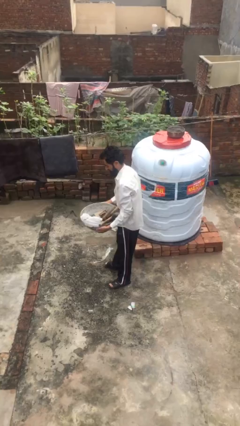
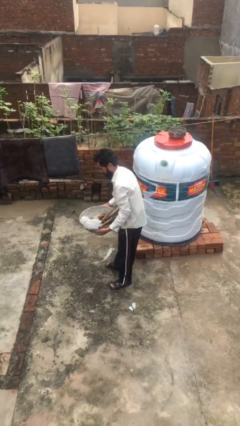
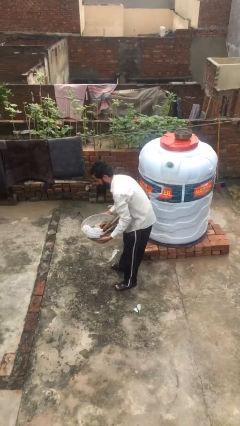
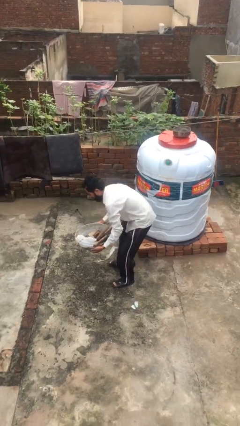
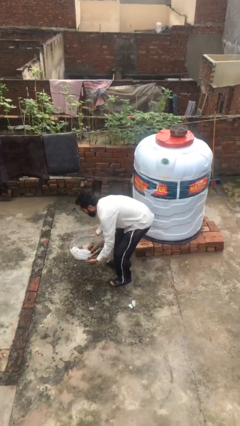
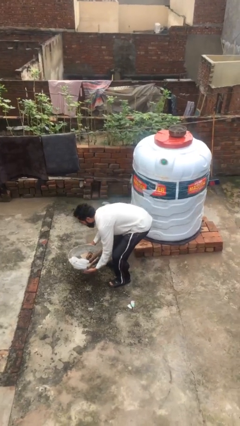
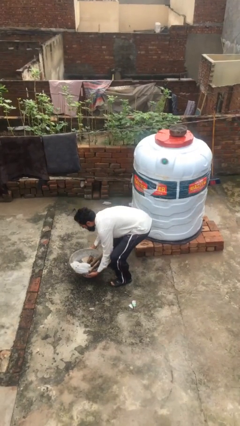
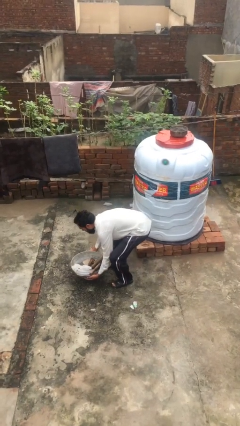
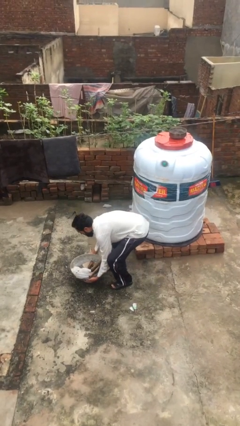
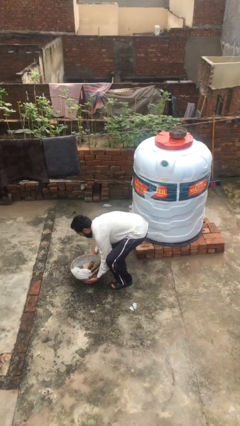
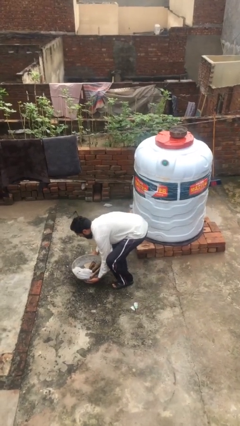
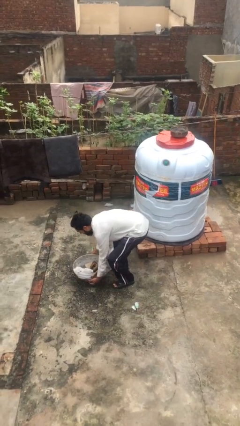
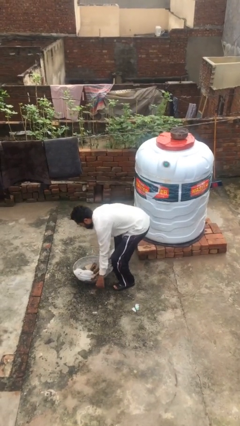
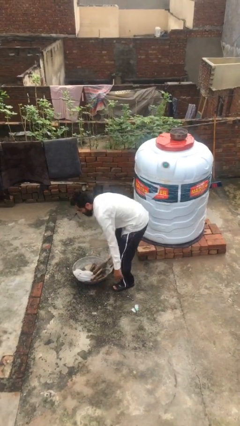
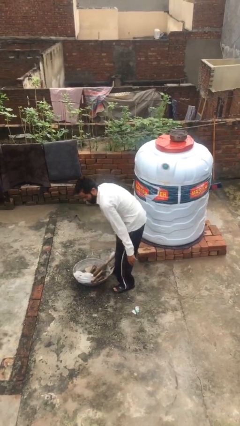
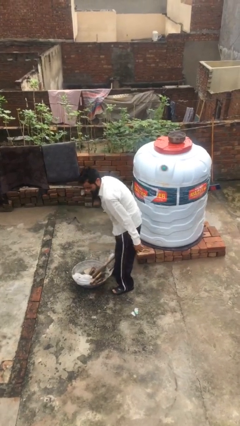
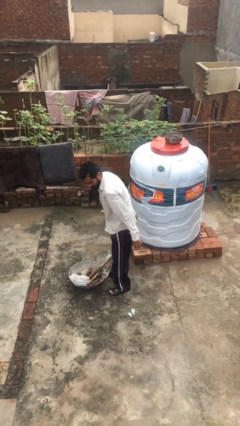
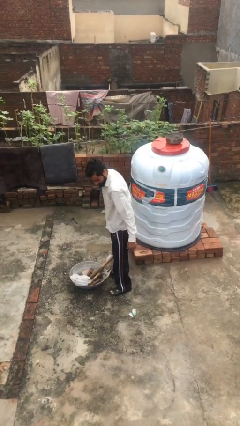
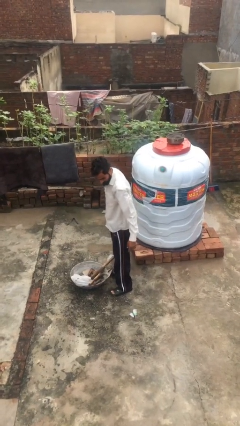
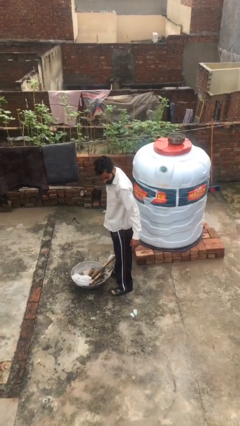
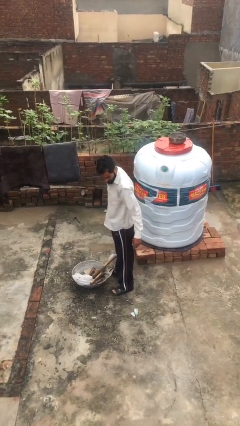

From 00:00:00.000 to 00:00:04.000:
person puts down object on floor

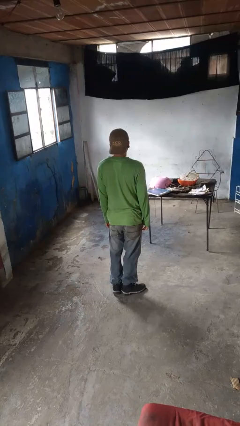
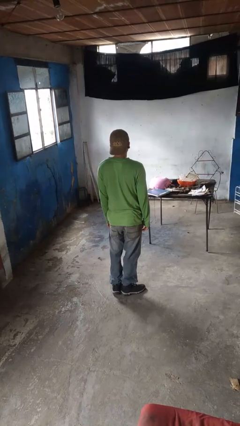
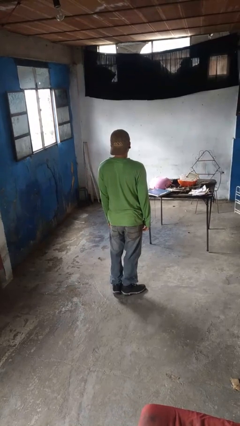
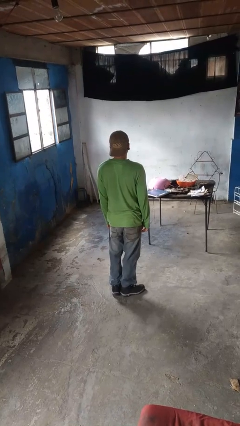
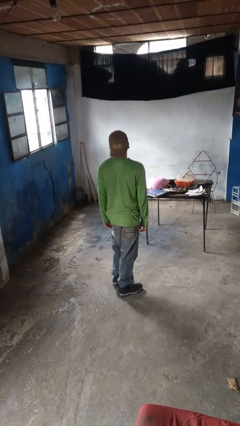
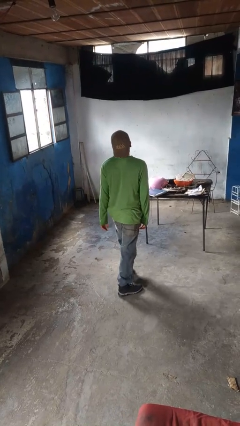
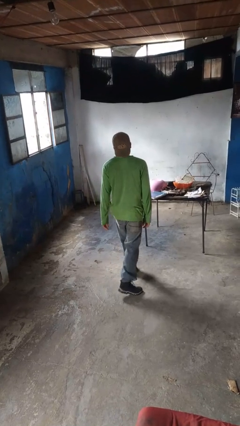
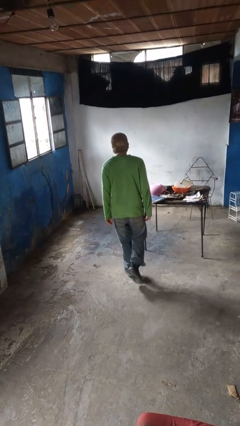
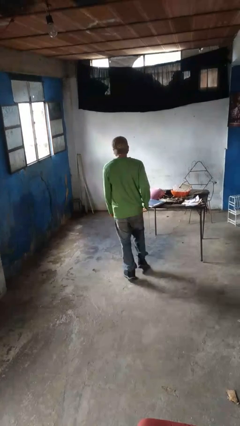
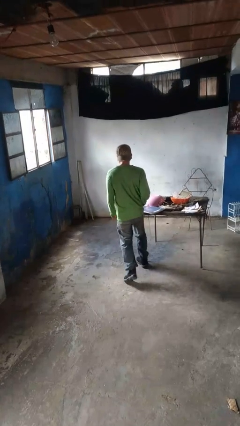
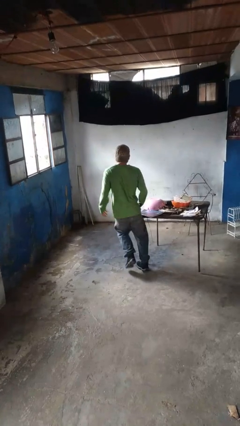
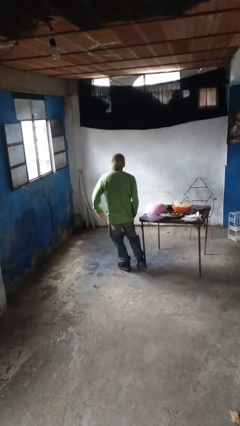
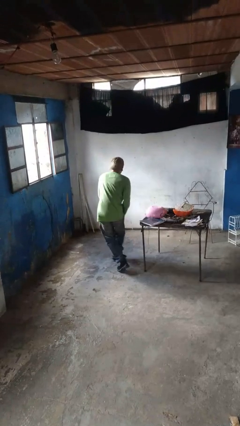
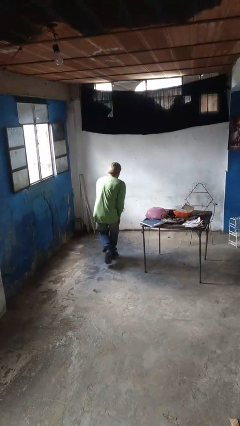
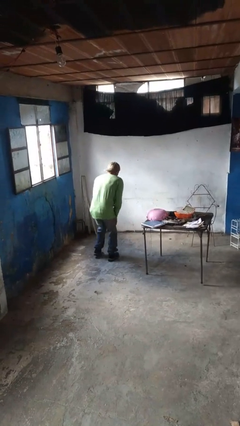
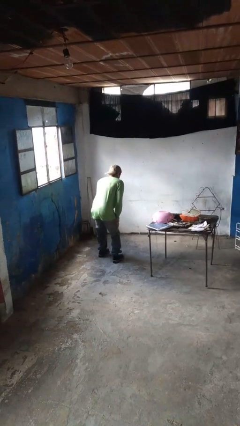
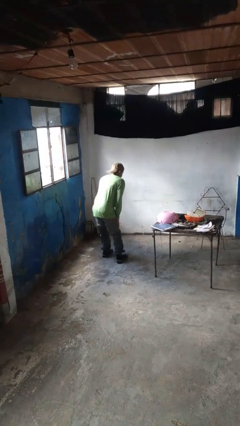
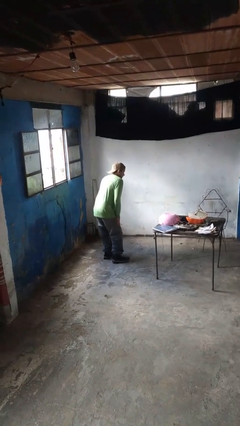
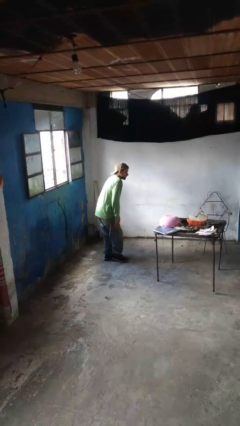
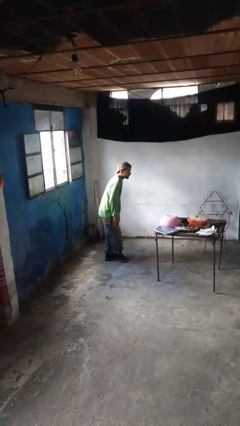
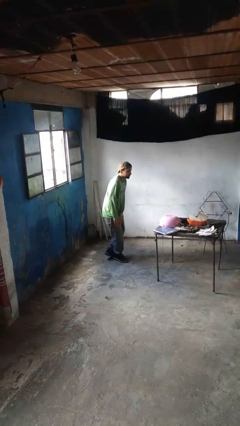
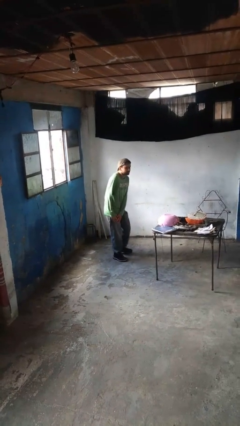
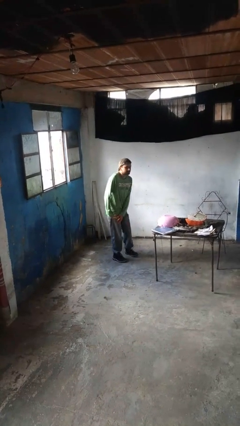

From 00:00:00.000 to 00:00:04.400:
person bumps into table

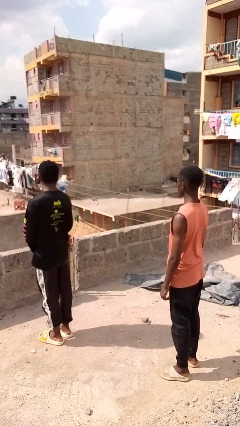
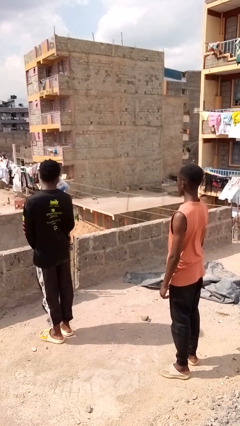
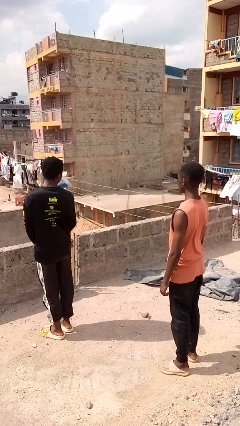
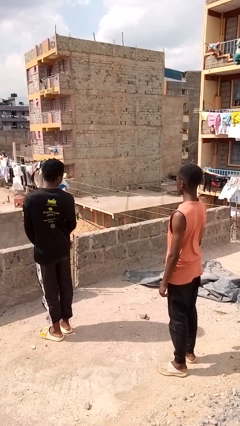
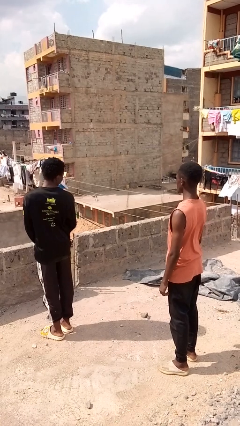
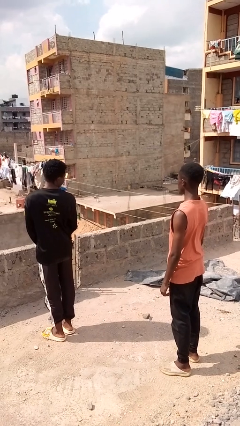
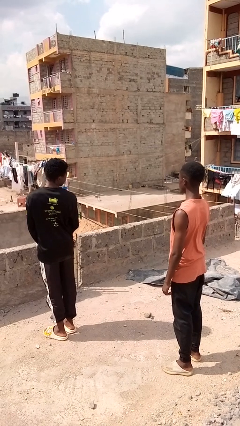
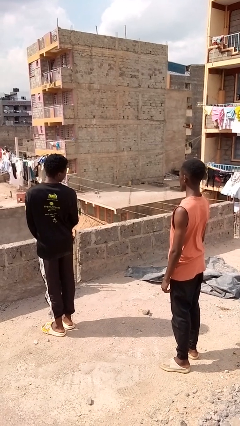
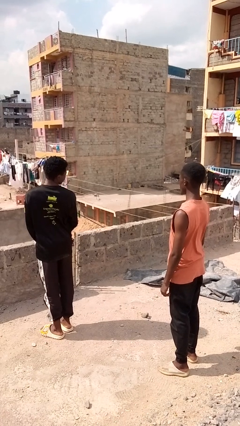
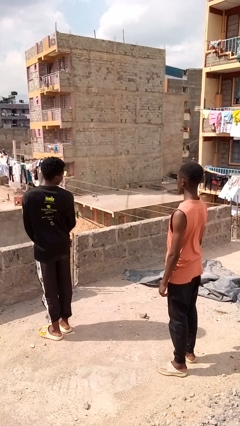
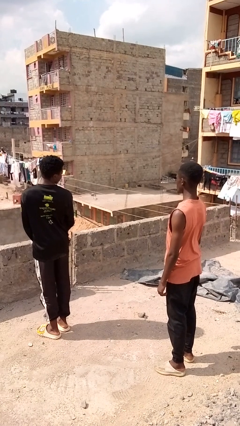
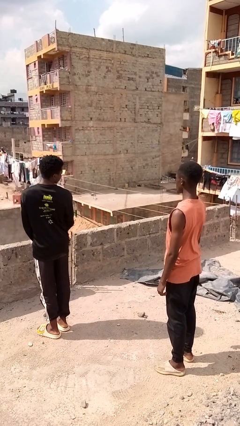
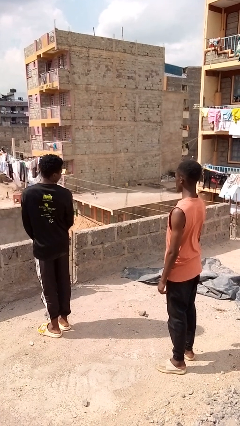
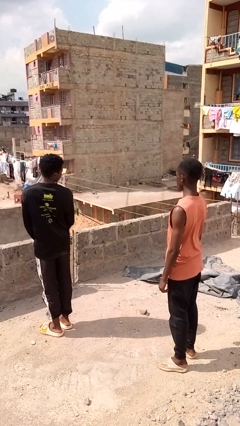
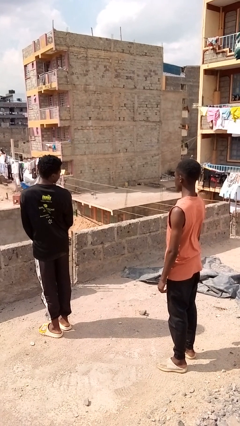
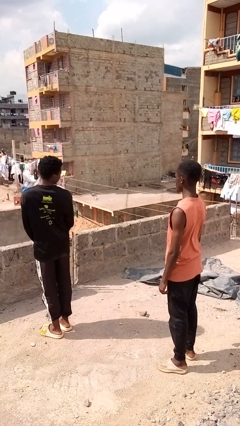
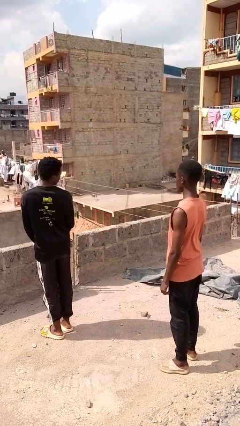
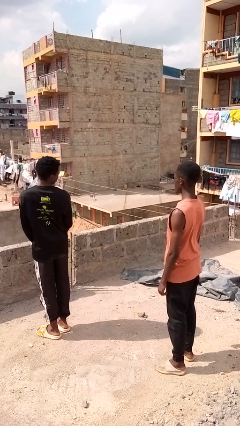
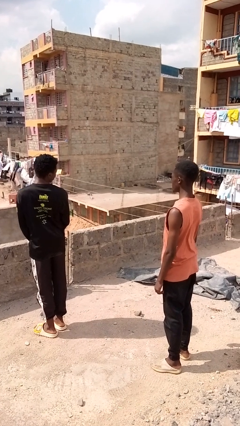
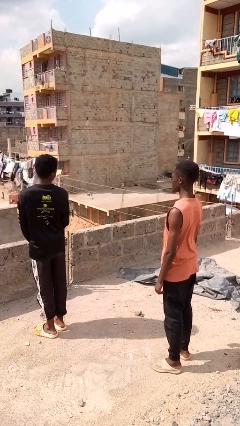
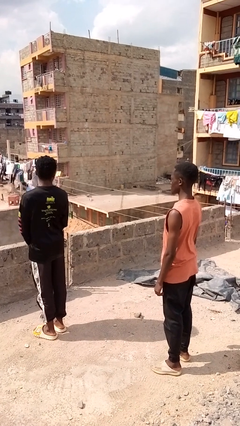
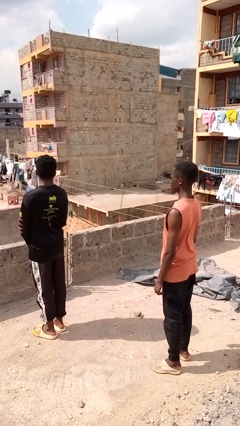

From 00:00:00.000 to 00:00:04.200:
person looks over shoulder

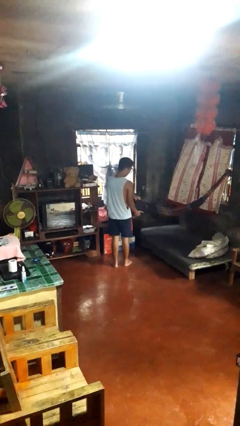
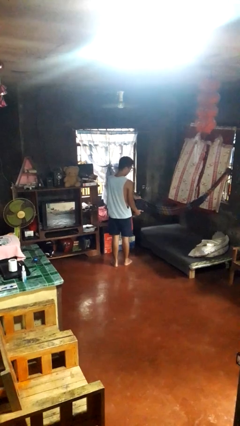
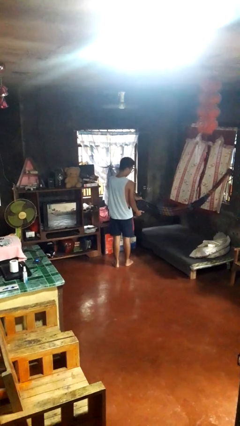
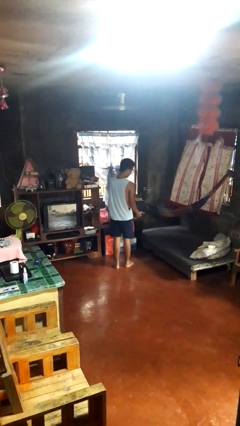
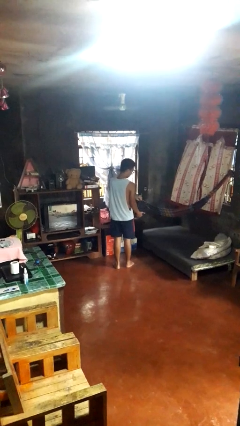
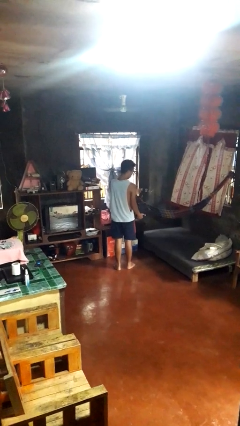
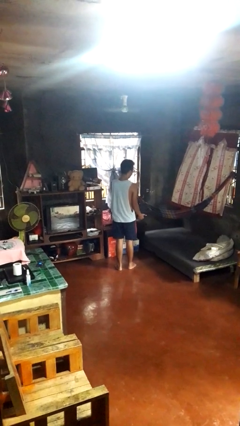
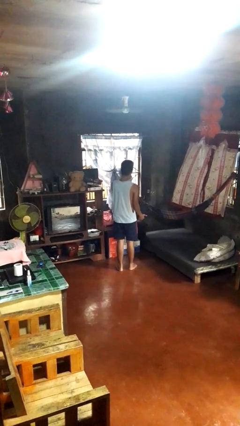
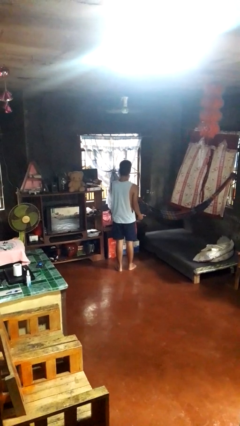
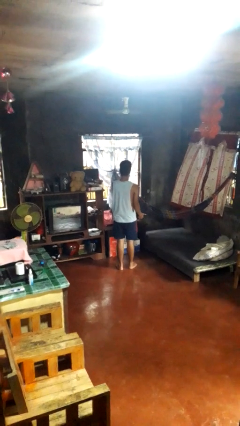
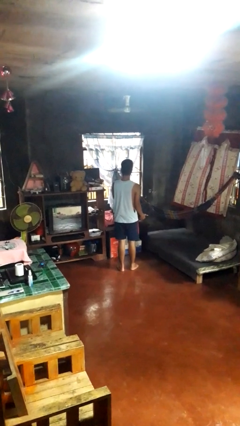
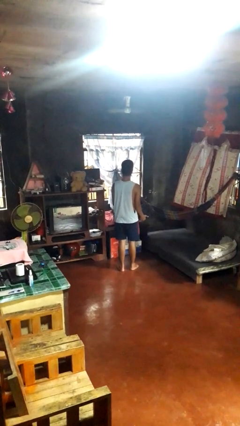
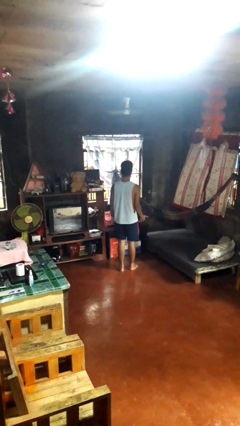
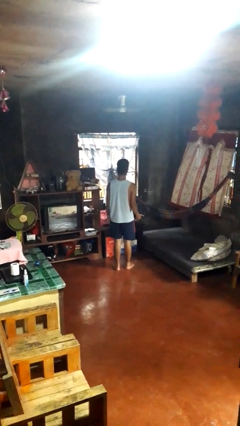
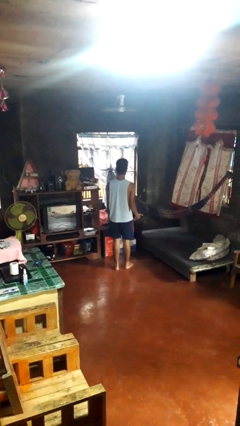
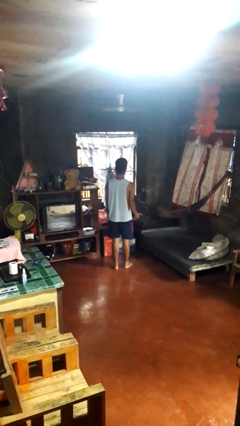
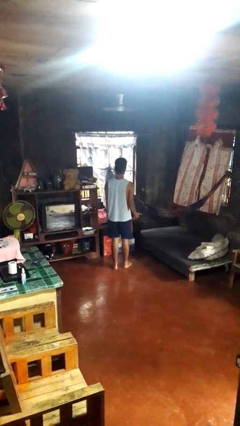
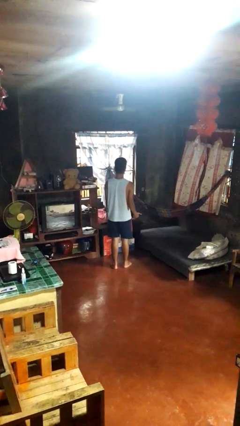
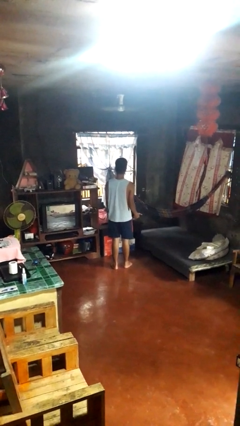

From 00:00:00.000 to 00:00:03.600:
person eats snack from bag

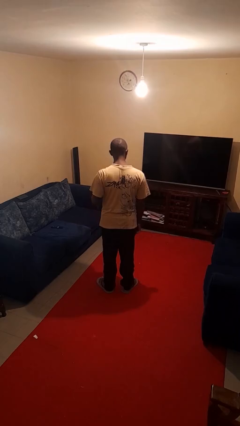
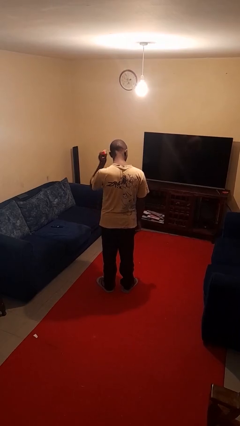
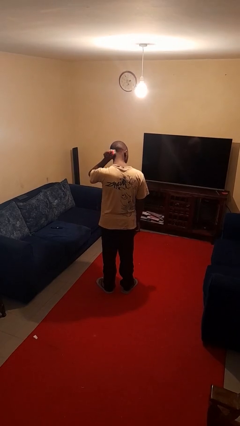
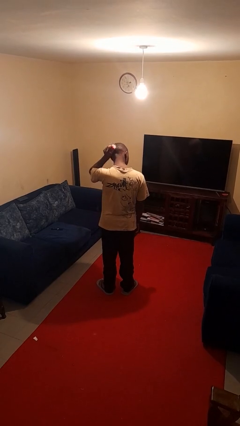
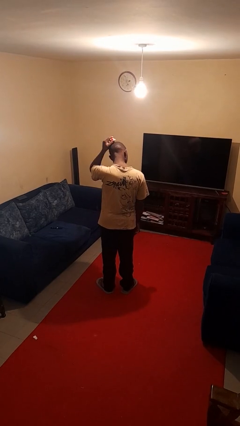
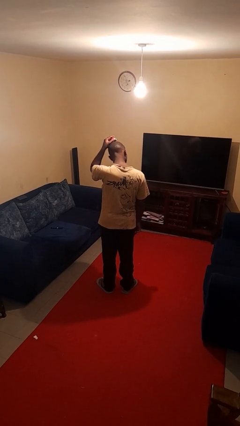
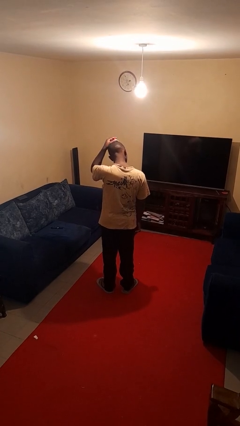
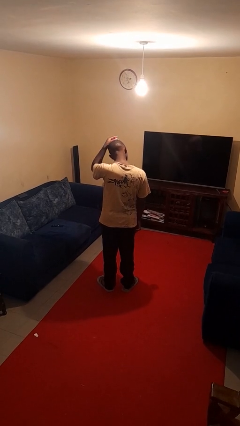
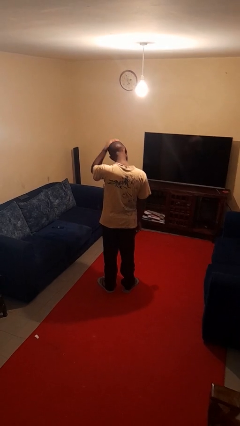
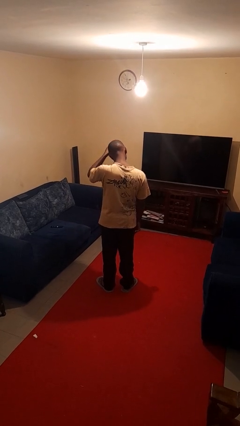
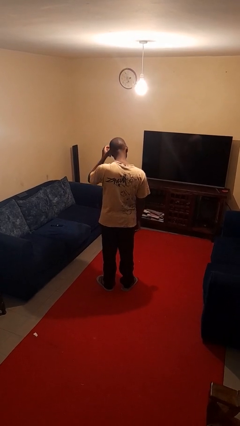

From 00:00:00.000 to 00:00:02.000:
person brushes hair
